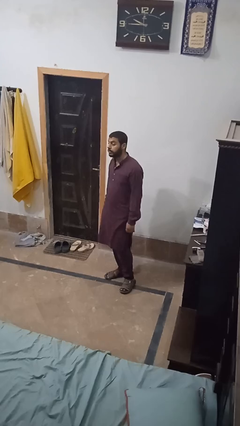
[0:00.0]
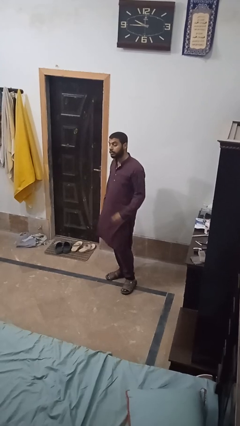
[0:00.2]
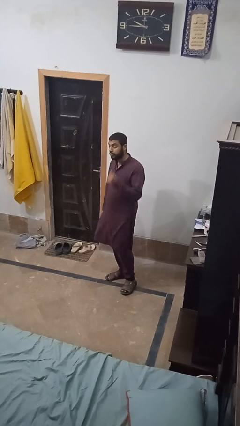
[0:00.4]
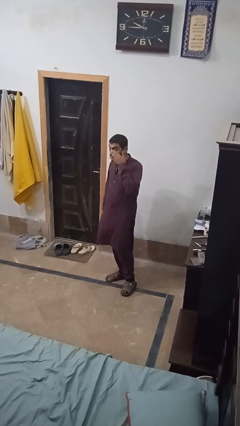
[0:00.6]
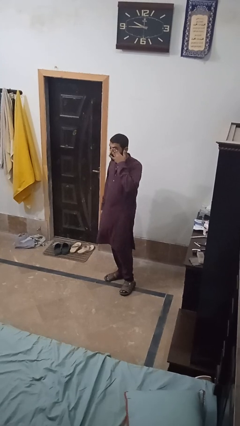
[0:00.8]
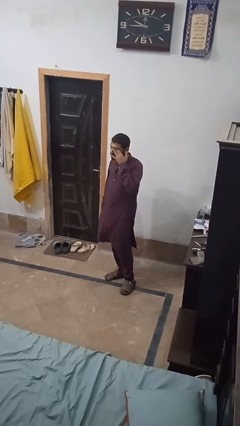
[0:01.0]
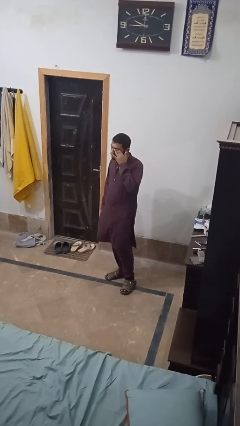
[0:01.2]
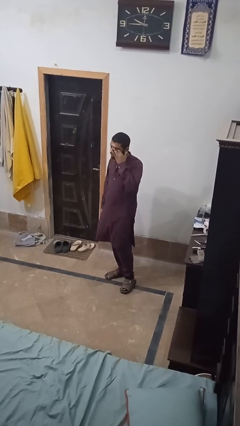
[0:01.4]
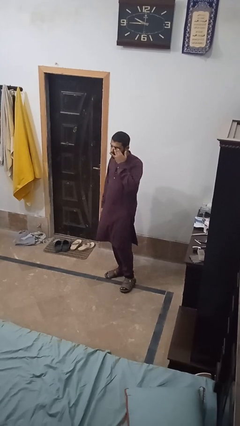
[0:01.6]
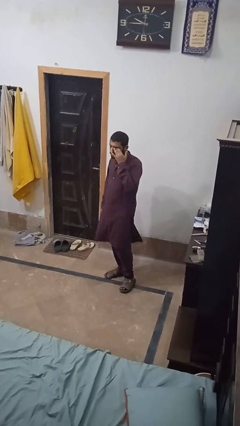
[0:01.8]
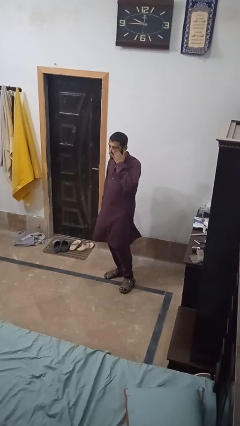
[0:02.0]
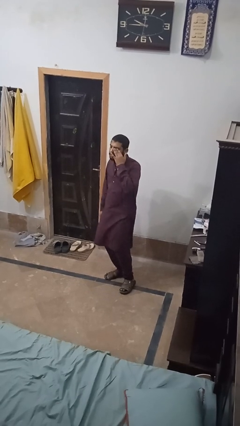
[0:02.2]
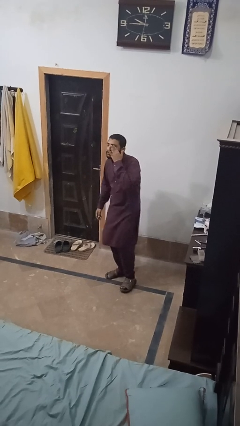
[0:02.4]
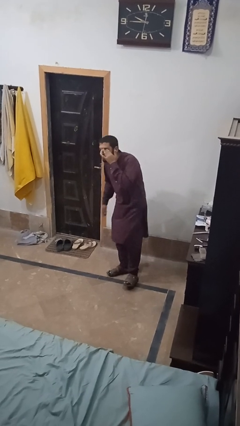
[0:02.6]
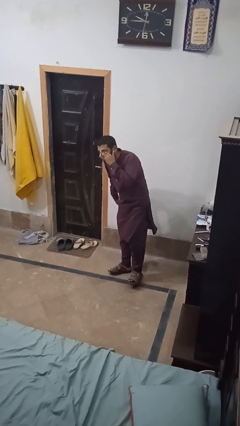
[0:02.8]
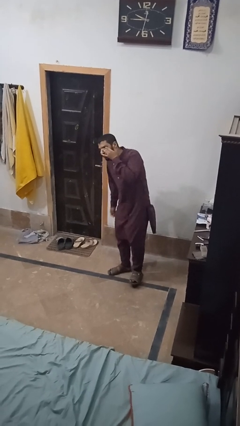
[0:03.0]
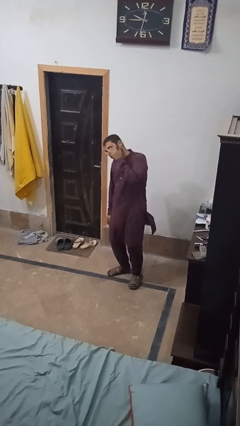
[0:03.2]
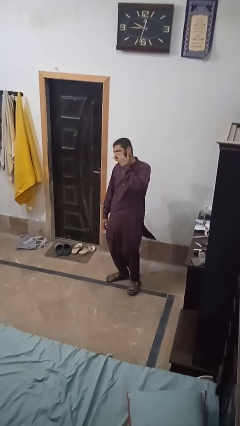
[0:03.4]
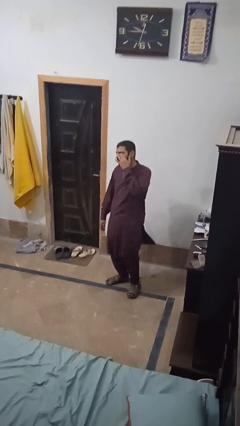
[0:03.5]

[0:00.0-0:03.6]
person rubs eyes

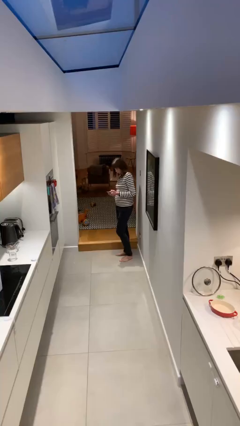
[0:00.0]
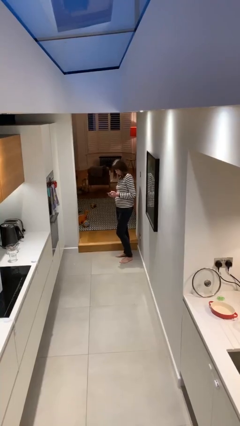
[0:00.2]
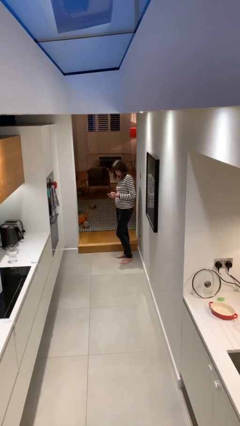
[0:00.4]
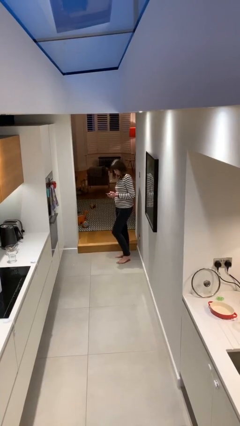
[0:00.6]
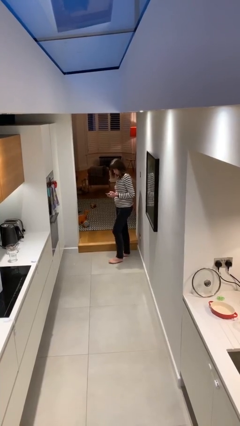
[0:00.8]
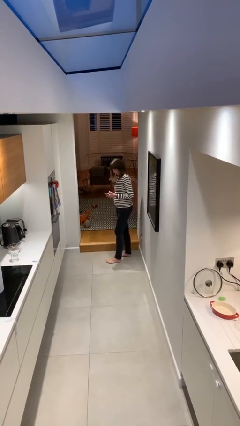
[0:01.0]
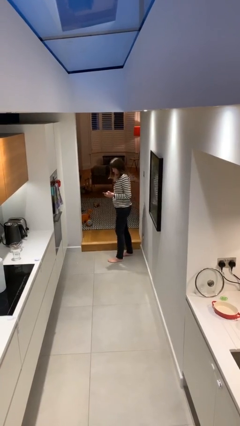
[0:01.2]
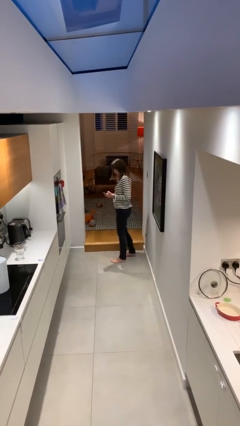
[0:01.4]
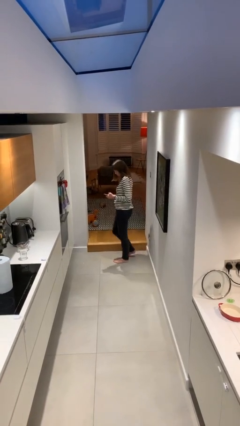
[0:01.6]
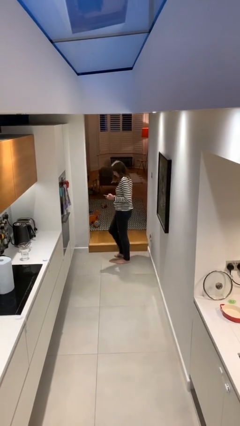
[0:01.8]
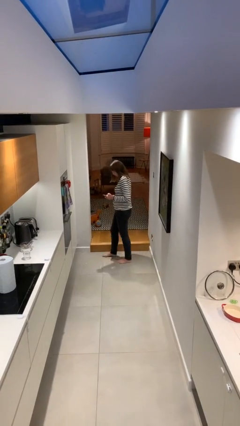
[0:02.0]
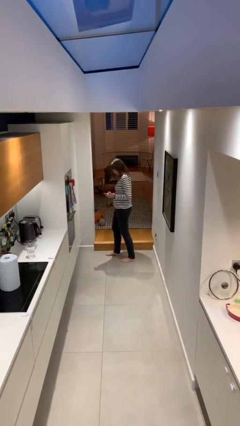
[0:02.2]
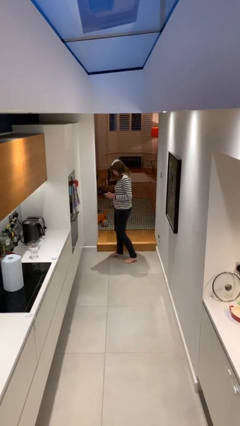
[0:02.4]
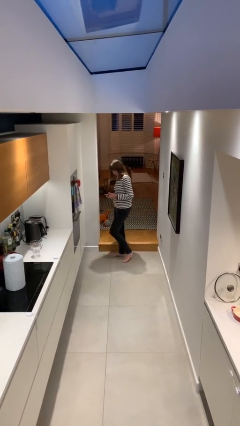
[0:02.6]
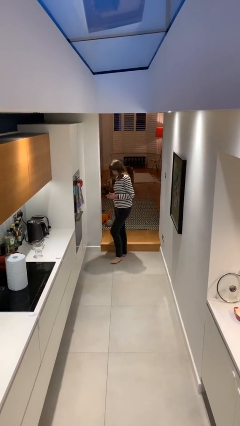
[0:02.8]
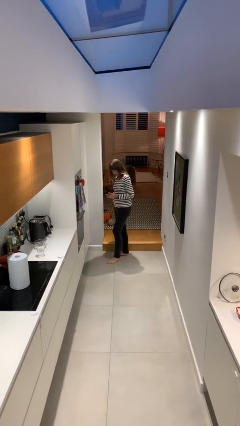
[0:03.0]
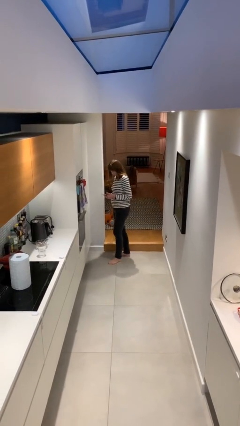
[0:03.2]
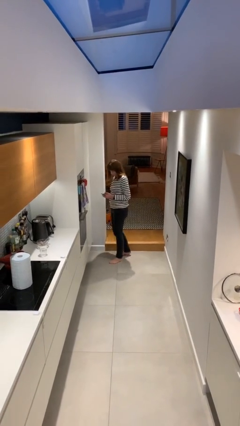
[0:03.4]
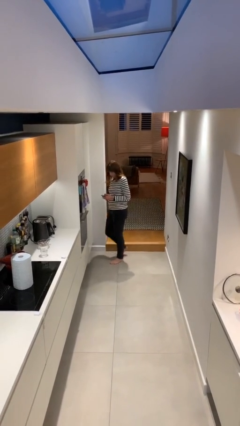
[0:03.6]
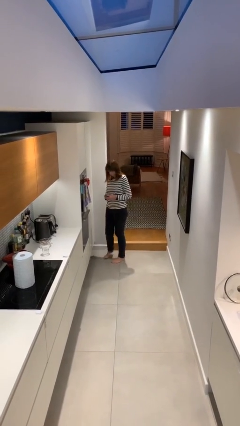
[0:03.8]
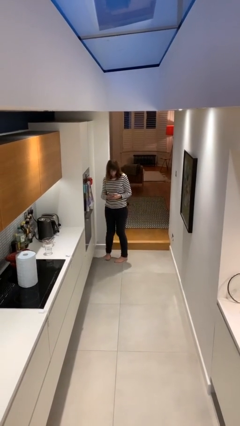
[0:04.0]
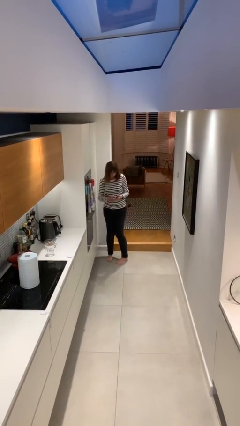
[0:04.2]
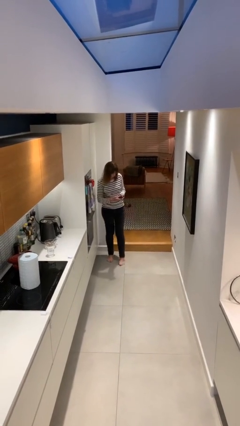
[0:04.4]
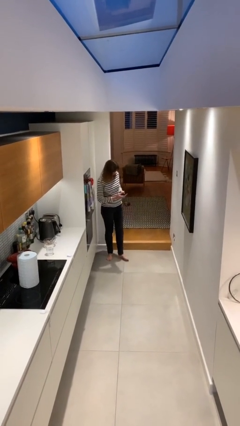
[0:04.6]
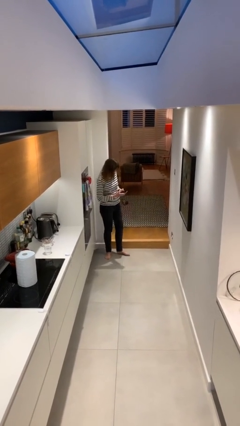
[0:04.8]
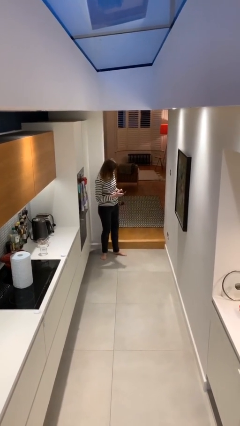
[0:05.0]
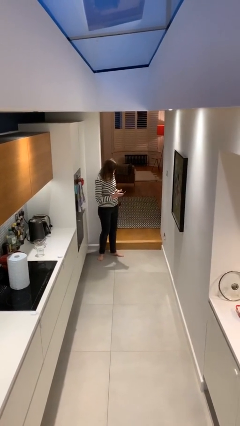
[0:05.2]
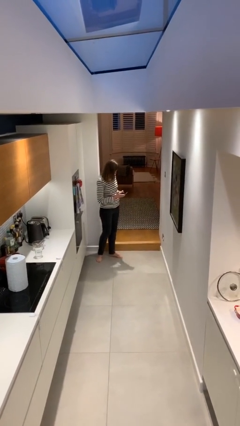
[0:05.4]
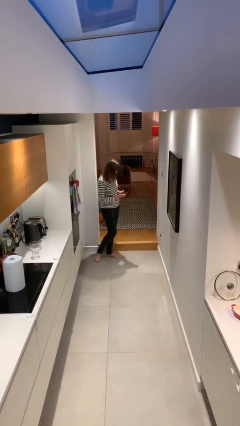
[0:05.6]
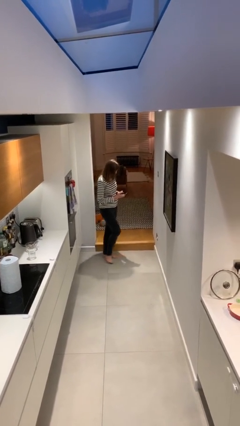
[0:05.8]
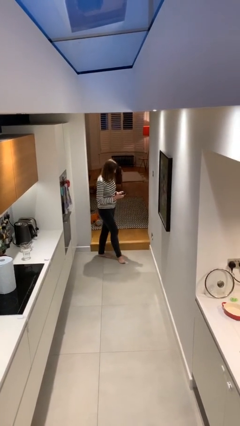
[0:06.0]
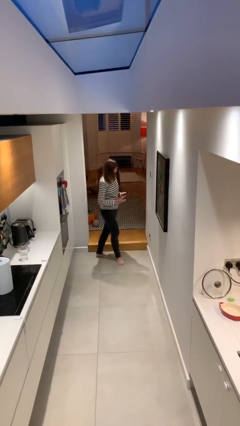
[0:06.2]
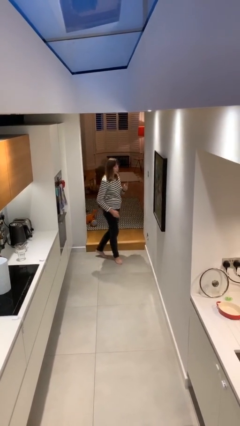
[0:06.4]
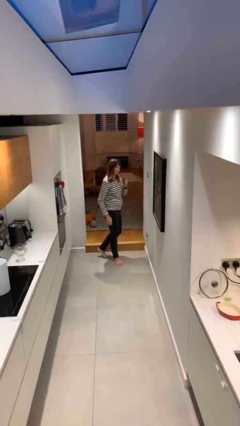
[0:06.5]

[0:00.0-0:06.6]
person texts on phone

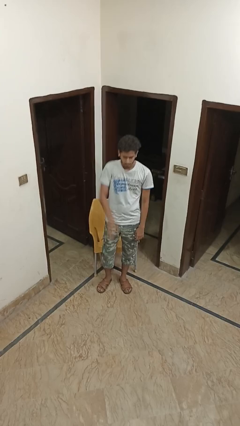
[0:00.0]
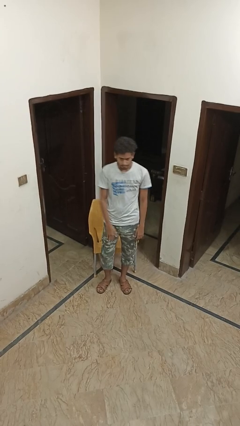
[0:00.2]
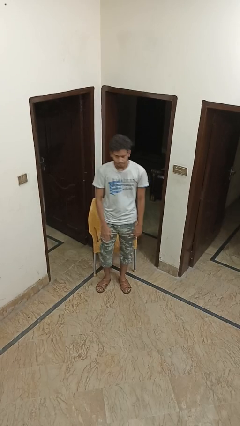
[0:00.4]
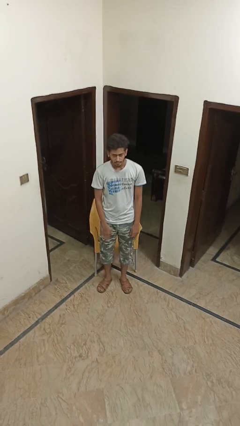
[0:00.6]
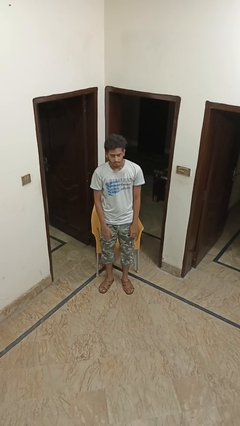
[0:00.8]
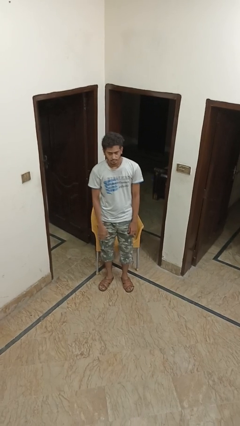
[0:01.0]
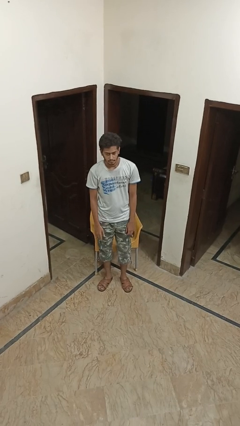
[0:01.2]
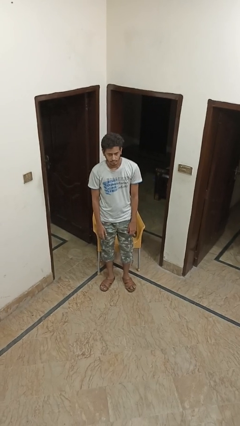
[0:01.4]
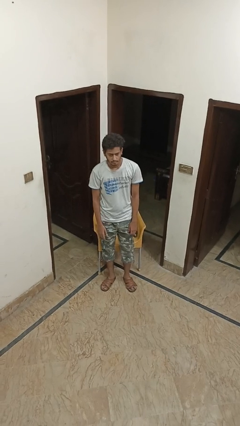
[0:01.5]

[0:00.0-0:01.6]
person gestures lower hand

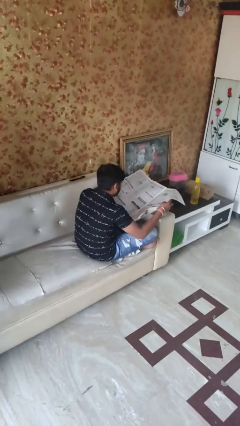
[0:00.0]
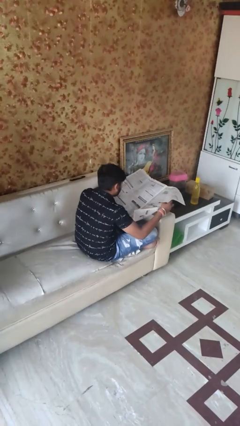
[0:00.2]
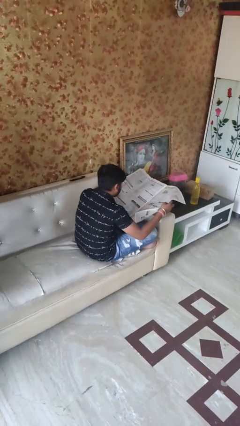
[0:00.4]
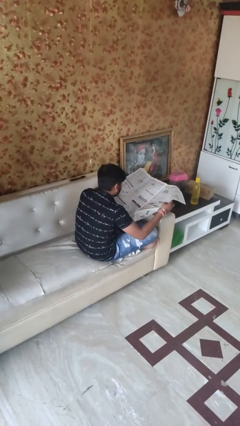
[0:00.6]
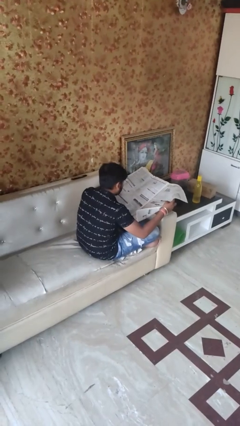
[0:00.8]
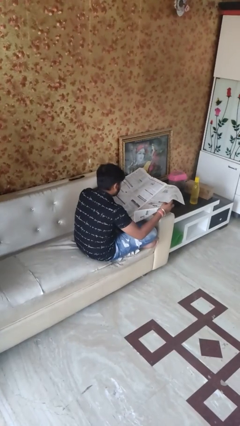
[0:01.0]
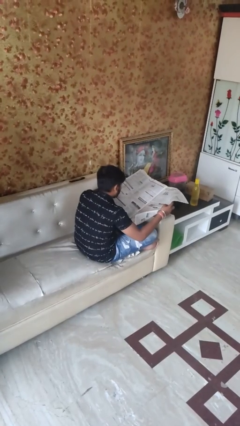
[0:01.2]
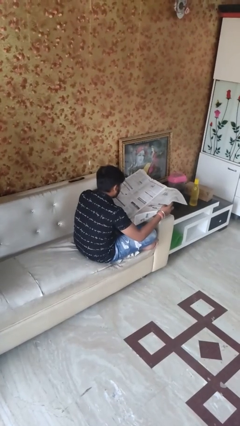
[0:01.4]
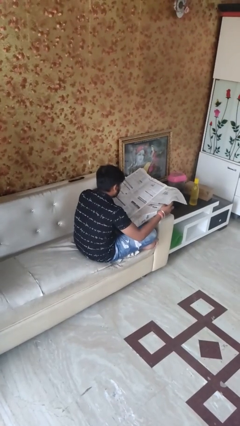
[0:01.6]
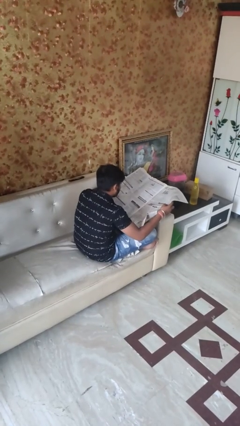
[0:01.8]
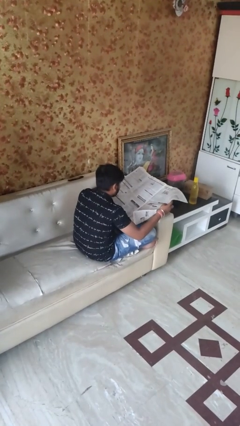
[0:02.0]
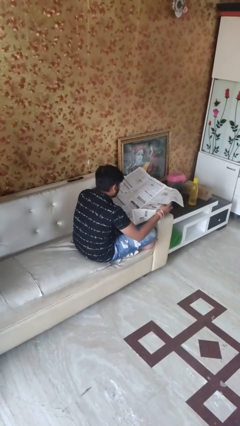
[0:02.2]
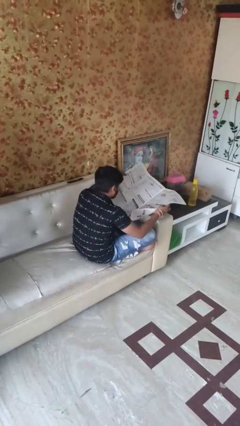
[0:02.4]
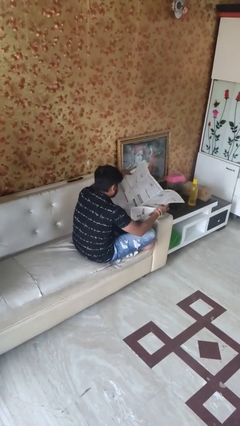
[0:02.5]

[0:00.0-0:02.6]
person reads newspaper

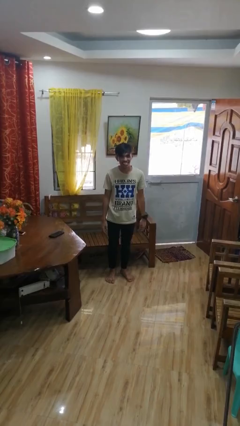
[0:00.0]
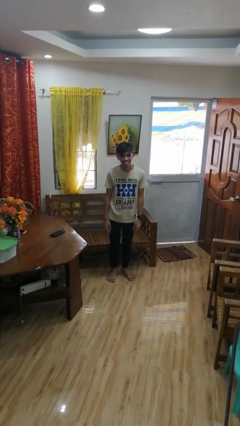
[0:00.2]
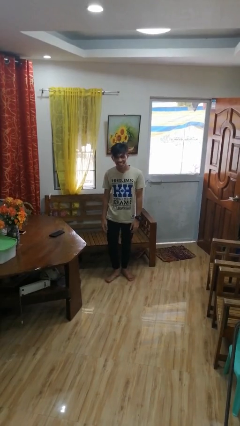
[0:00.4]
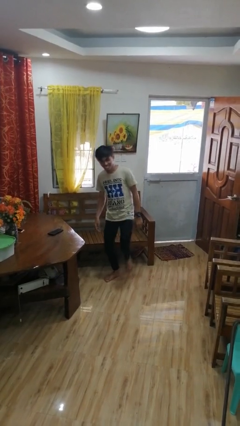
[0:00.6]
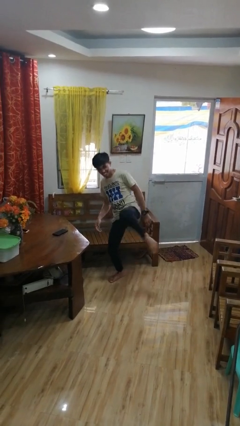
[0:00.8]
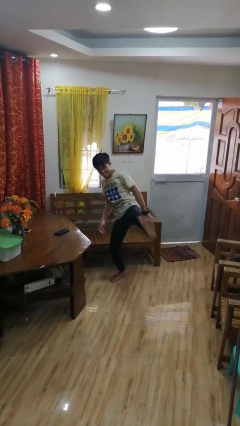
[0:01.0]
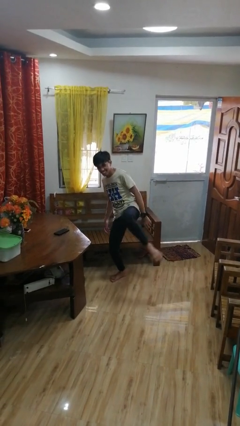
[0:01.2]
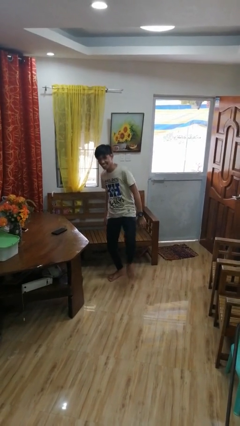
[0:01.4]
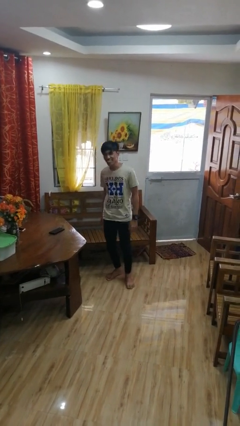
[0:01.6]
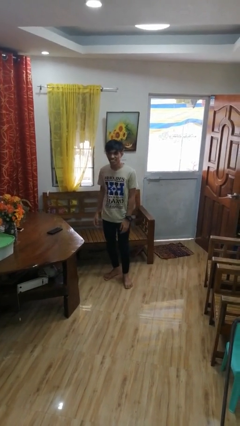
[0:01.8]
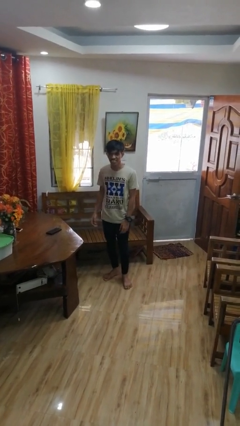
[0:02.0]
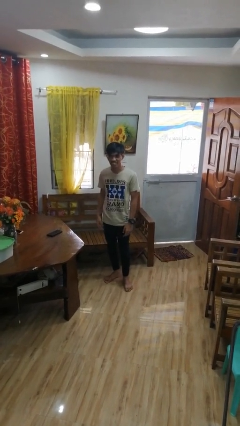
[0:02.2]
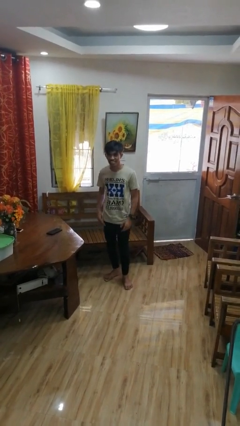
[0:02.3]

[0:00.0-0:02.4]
person karate kicks

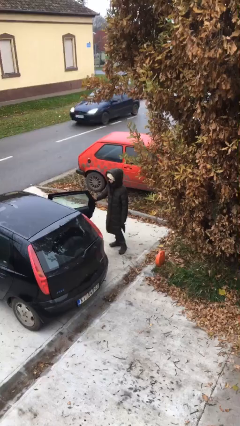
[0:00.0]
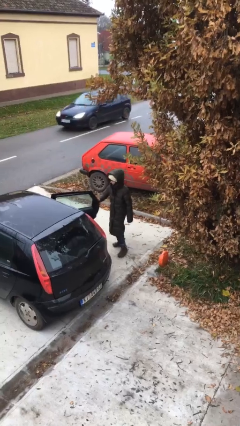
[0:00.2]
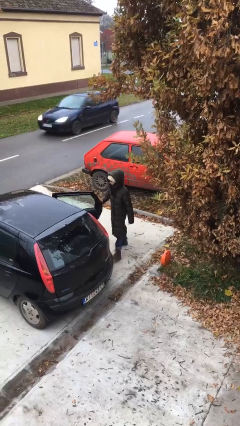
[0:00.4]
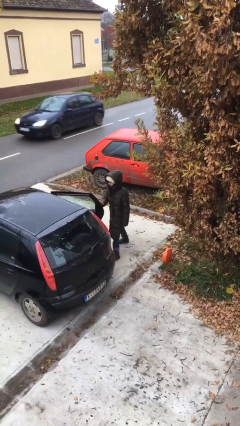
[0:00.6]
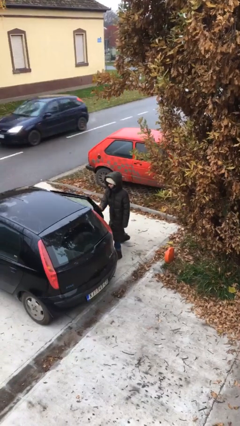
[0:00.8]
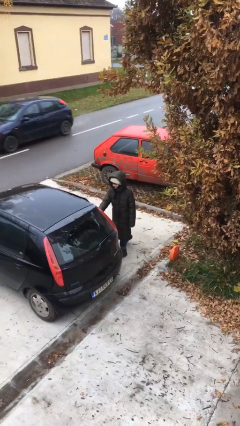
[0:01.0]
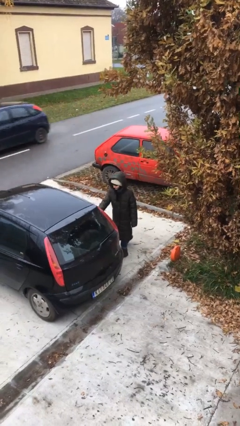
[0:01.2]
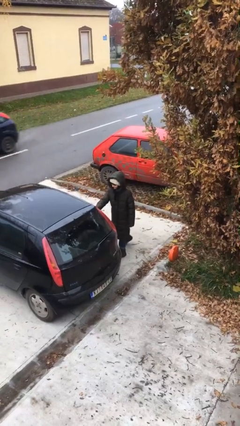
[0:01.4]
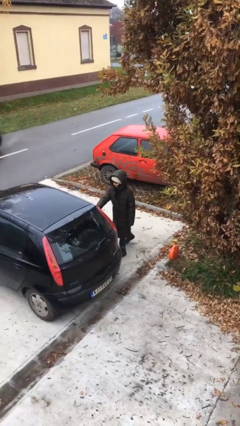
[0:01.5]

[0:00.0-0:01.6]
person closes car door
